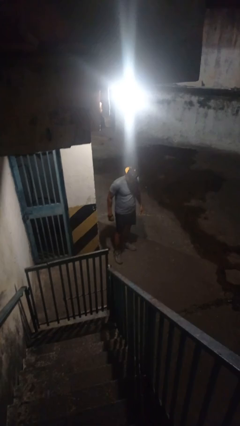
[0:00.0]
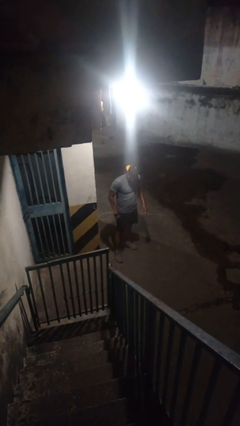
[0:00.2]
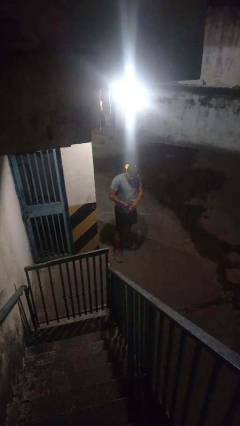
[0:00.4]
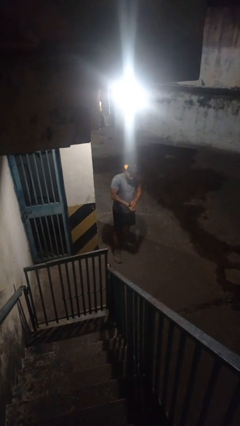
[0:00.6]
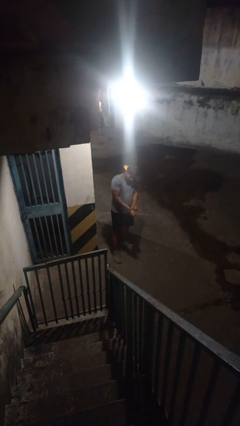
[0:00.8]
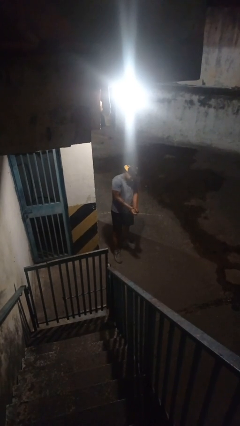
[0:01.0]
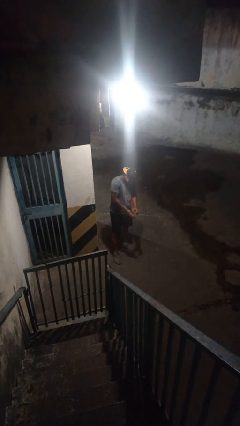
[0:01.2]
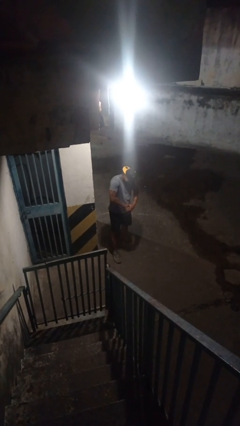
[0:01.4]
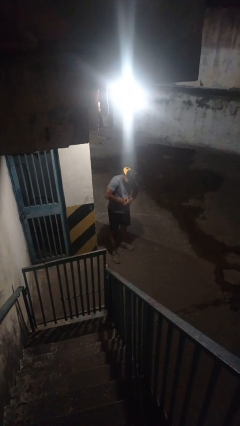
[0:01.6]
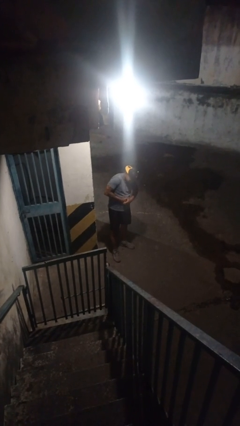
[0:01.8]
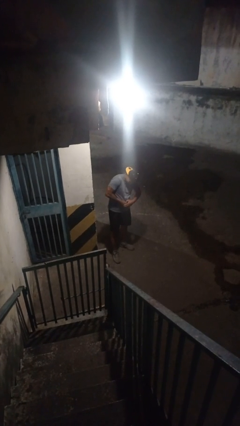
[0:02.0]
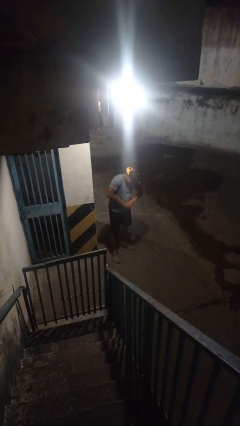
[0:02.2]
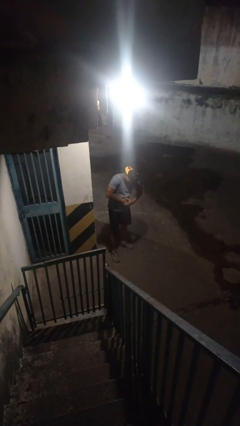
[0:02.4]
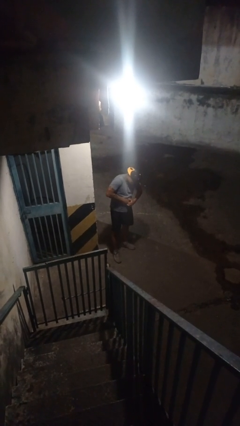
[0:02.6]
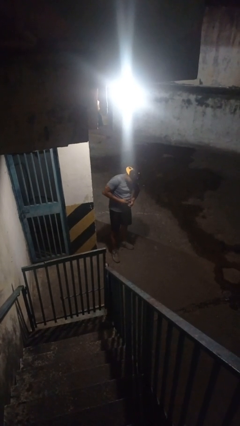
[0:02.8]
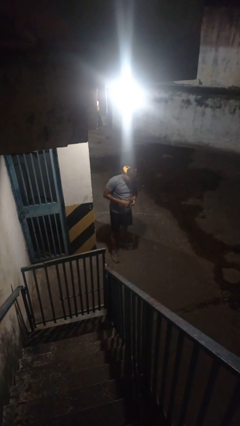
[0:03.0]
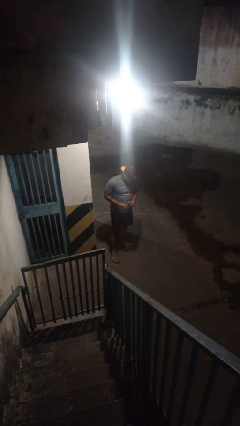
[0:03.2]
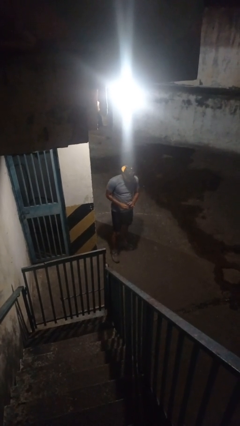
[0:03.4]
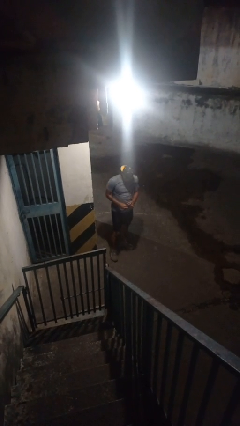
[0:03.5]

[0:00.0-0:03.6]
person takes off wristwatch

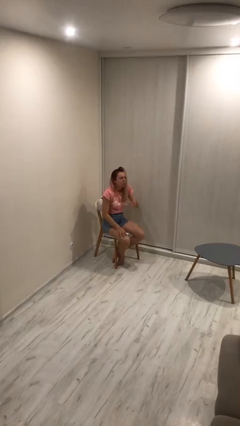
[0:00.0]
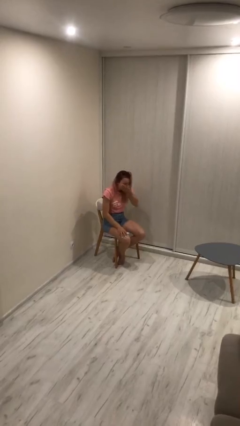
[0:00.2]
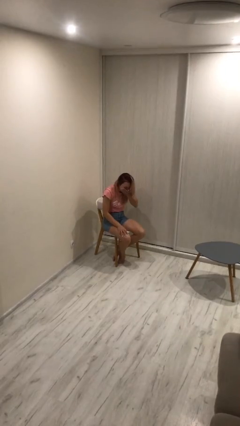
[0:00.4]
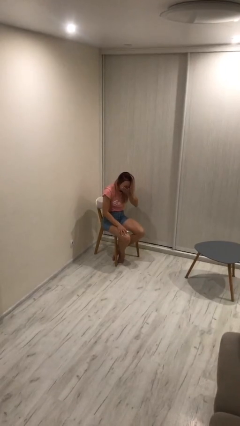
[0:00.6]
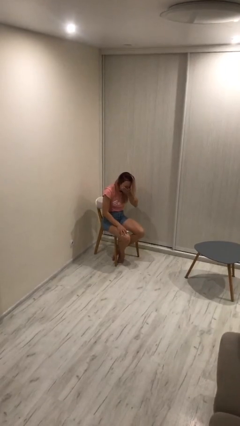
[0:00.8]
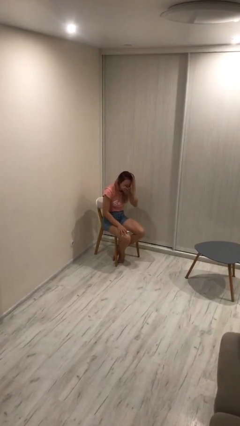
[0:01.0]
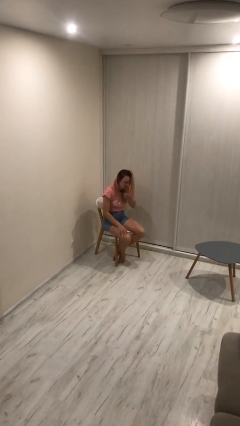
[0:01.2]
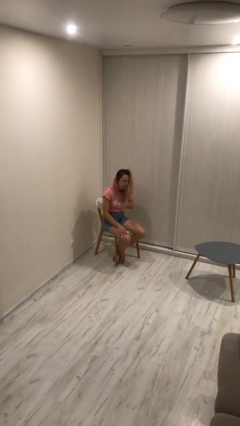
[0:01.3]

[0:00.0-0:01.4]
person sneezes into arm

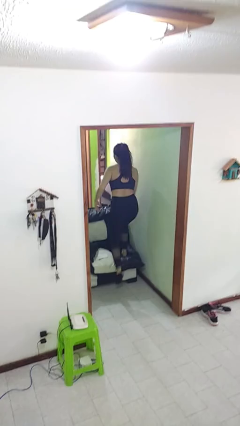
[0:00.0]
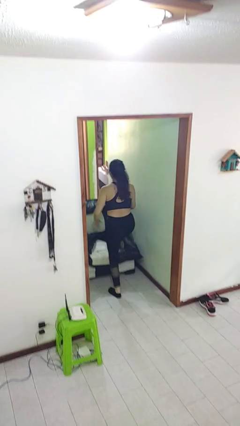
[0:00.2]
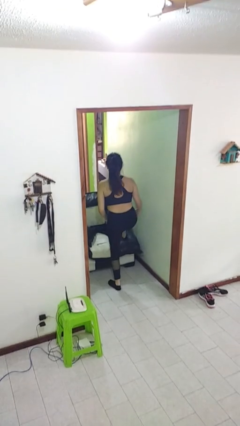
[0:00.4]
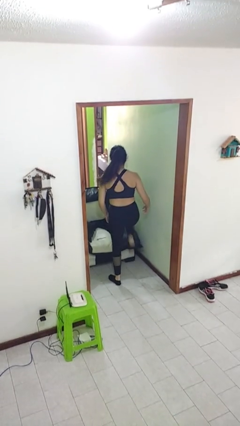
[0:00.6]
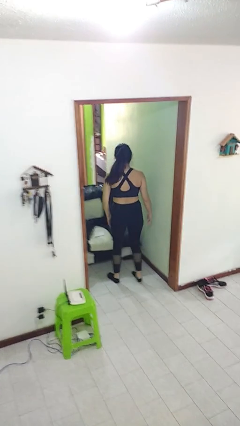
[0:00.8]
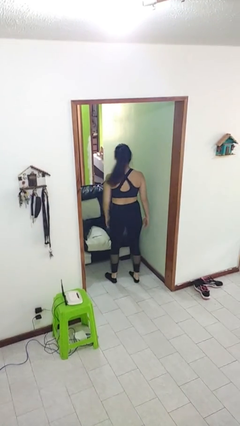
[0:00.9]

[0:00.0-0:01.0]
person climbs off couch

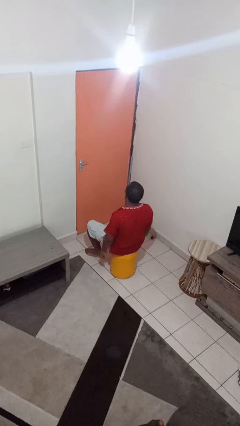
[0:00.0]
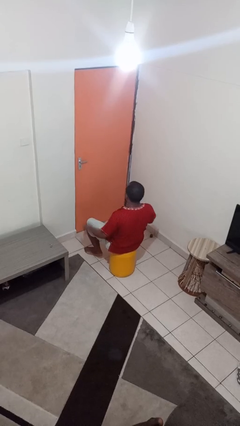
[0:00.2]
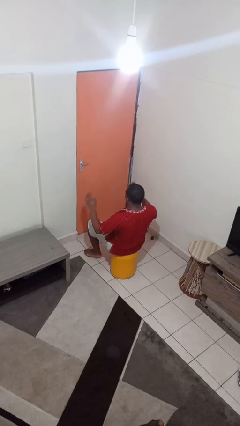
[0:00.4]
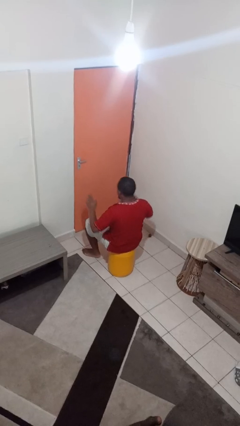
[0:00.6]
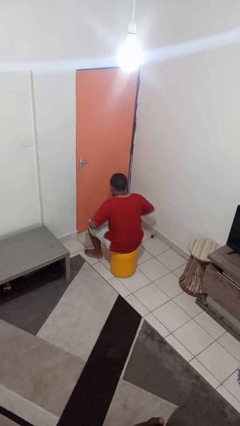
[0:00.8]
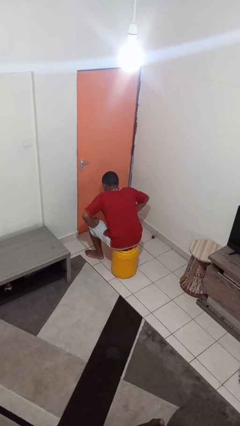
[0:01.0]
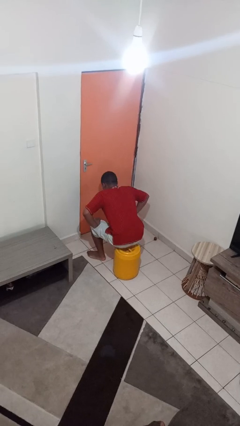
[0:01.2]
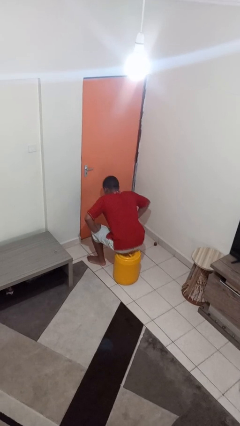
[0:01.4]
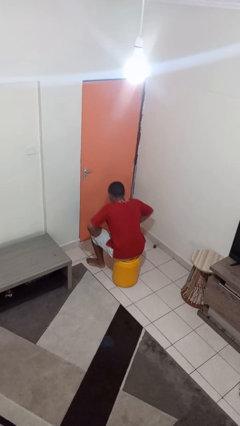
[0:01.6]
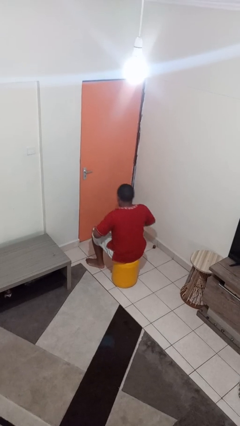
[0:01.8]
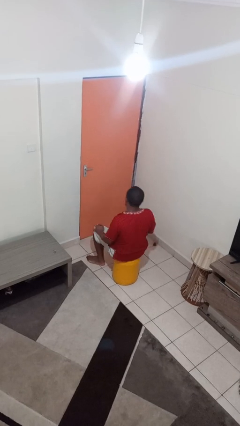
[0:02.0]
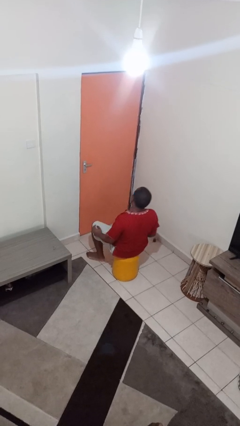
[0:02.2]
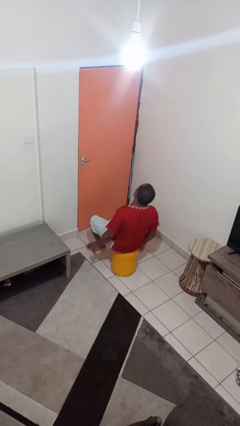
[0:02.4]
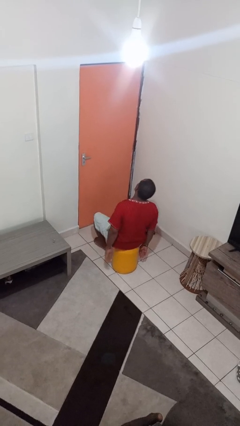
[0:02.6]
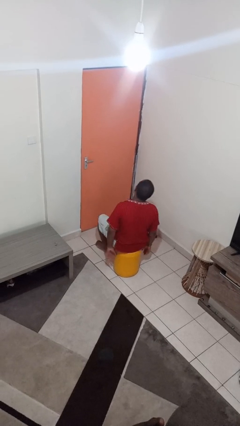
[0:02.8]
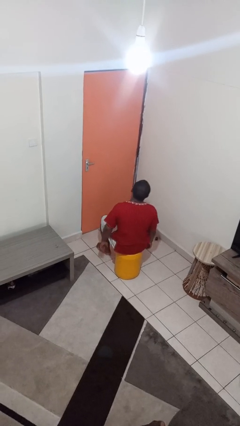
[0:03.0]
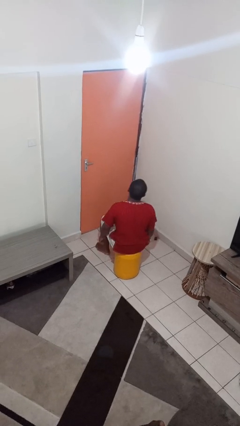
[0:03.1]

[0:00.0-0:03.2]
person slaps hands on thighs

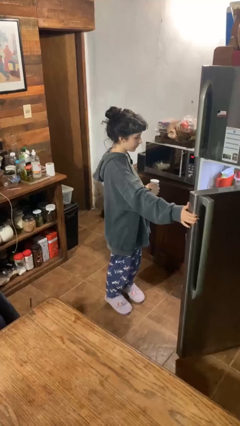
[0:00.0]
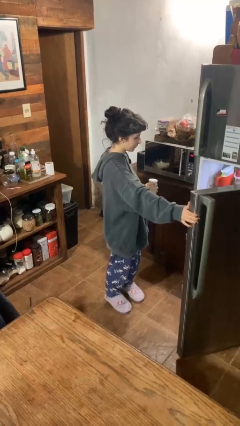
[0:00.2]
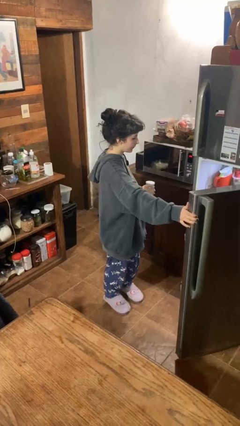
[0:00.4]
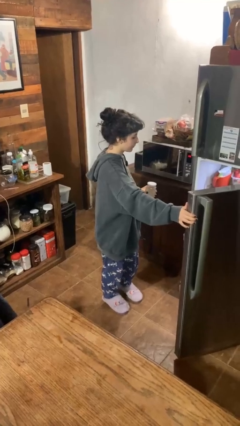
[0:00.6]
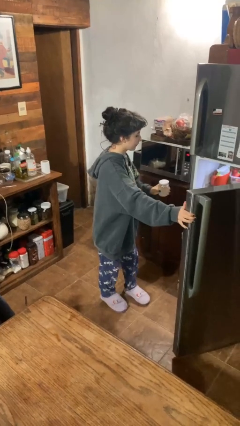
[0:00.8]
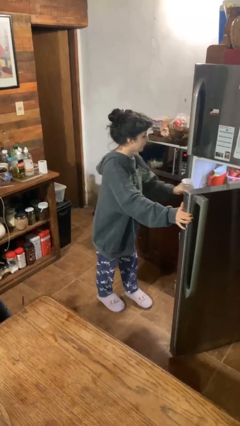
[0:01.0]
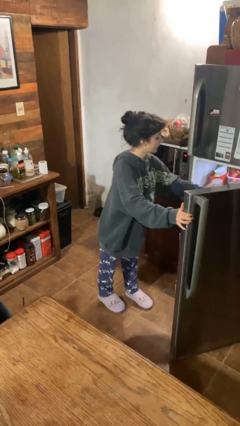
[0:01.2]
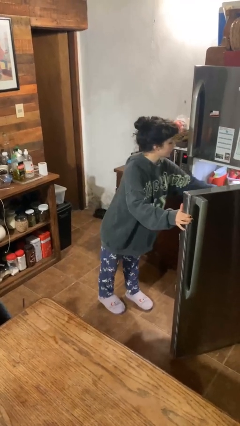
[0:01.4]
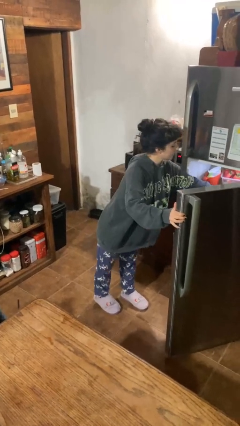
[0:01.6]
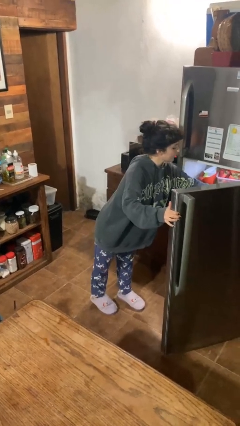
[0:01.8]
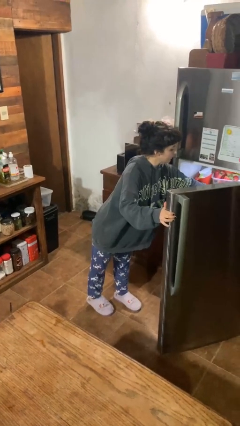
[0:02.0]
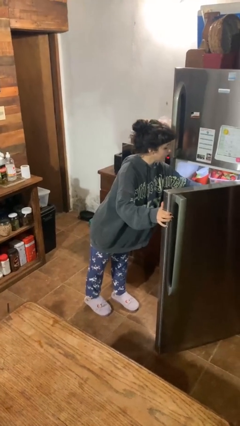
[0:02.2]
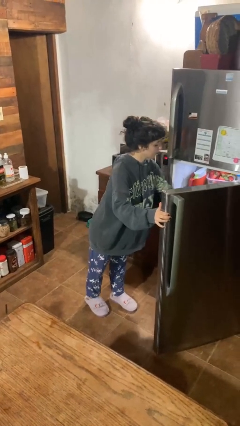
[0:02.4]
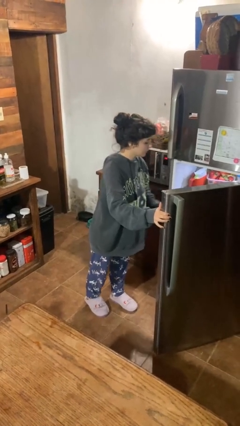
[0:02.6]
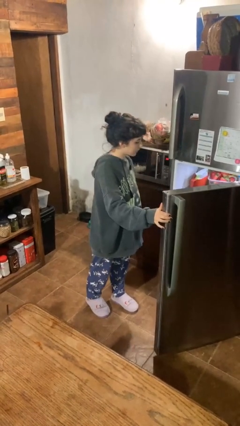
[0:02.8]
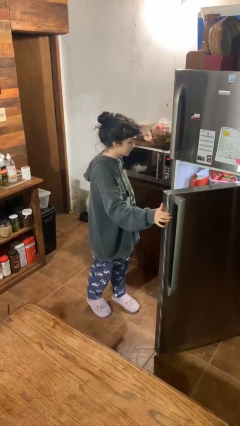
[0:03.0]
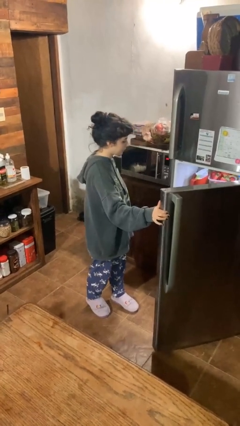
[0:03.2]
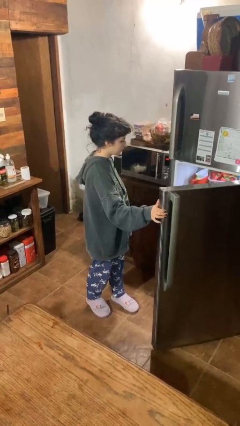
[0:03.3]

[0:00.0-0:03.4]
person puts object into refrigerator

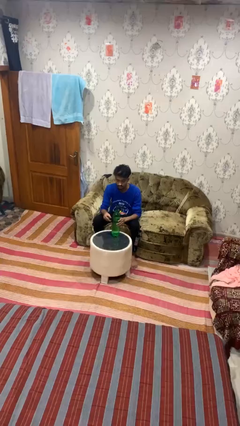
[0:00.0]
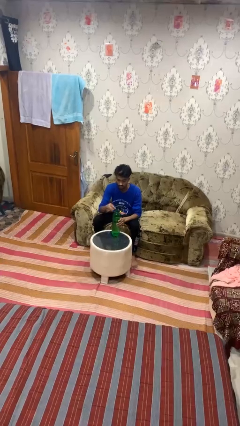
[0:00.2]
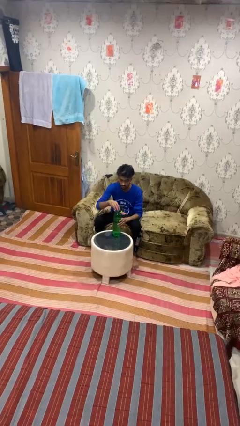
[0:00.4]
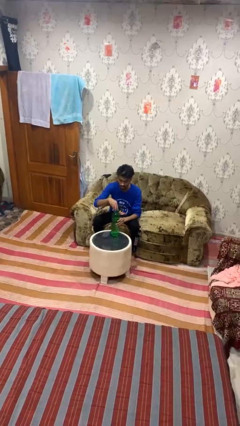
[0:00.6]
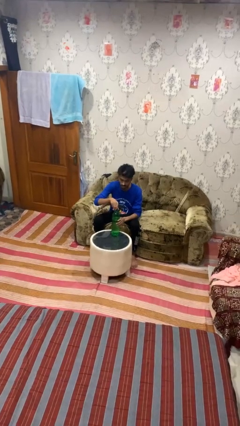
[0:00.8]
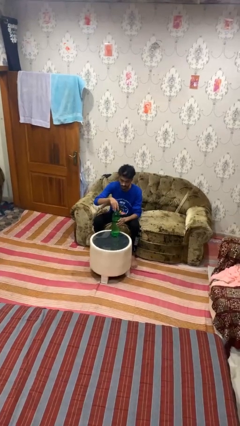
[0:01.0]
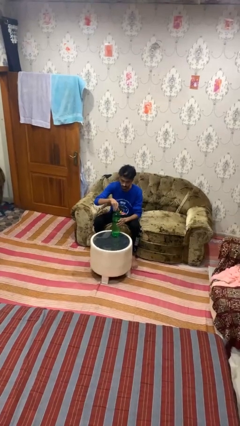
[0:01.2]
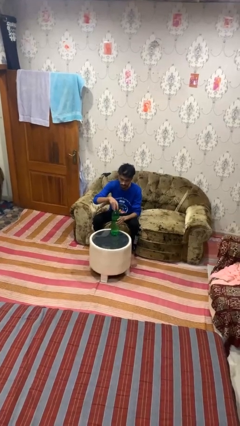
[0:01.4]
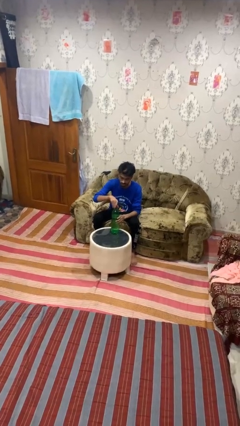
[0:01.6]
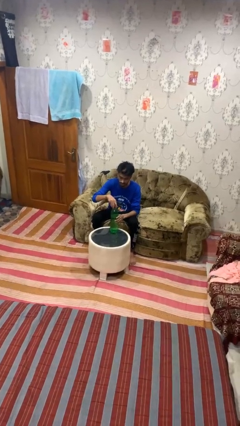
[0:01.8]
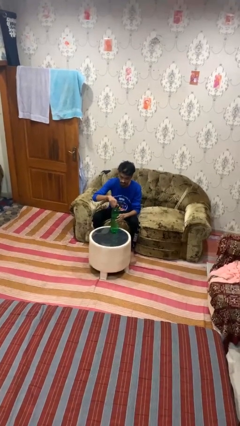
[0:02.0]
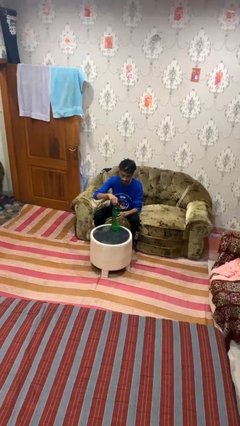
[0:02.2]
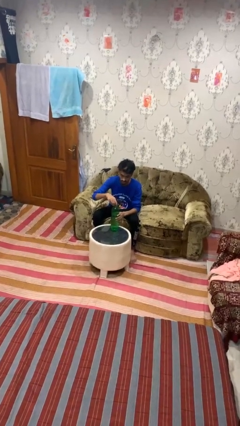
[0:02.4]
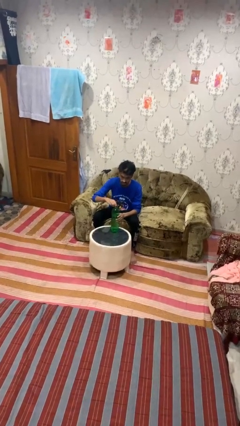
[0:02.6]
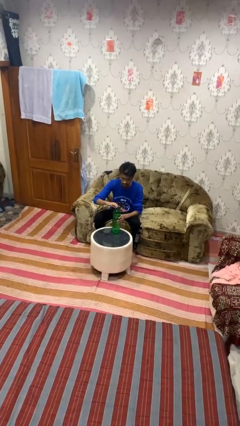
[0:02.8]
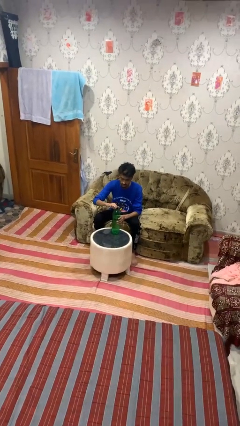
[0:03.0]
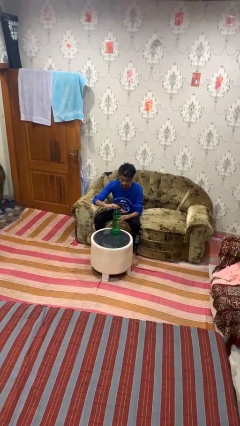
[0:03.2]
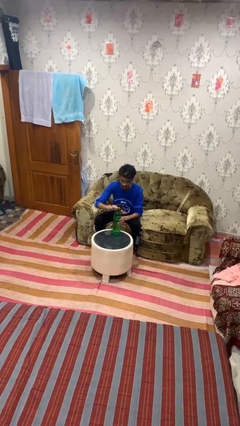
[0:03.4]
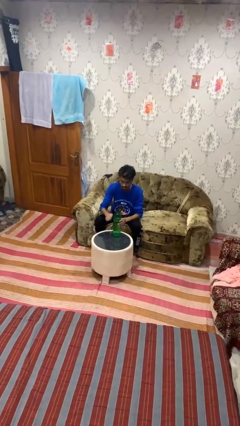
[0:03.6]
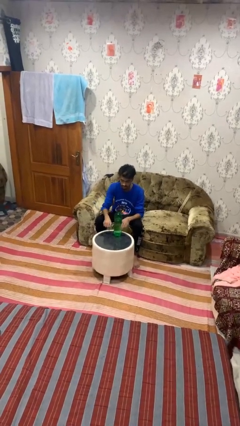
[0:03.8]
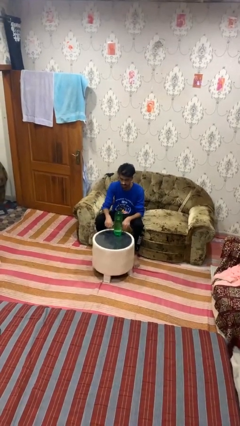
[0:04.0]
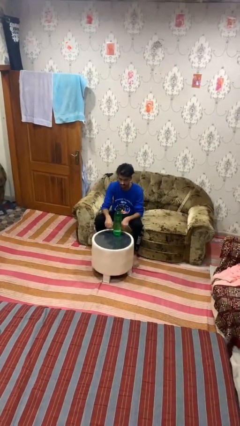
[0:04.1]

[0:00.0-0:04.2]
person screws lid to bottle

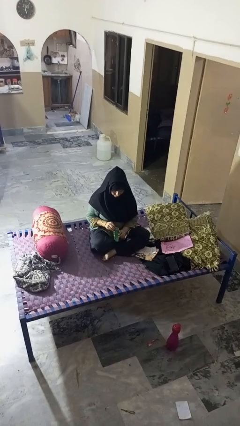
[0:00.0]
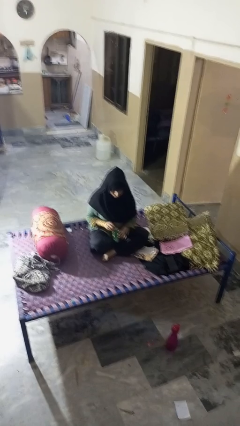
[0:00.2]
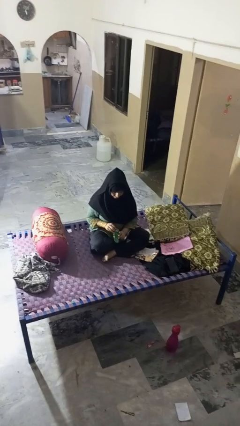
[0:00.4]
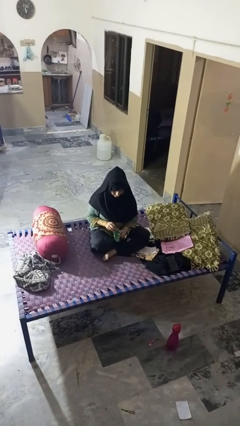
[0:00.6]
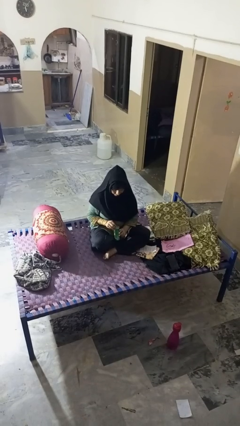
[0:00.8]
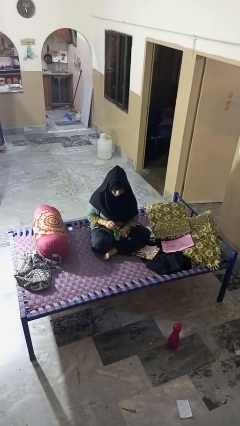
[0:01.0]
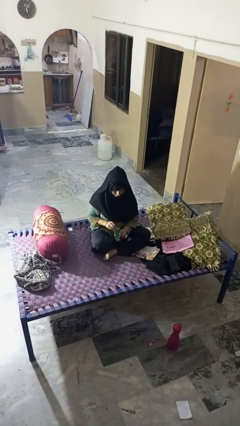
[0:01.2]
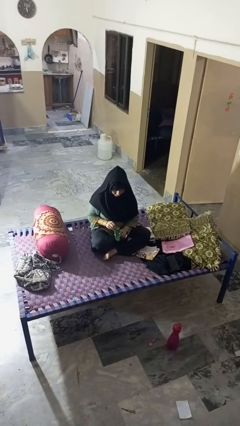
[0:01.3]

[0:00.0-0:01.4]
person opens can with can opener
